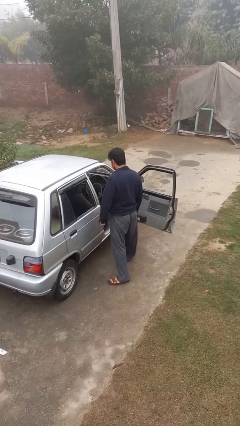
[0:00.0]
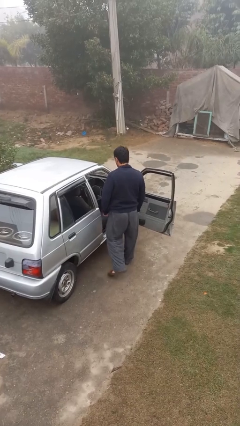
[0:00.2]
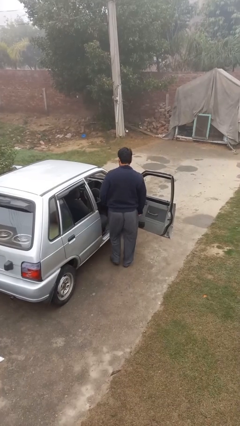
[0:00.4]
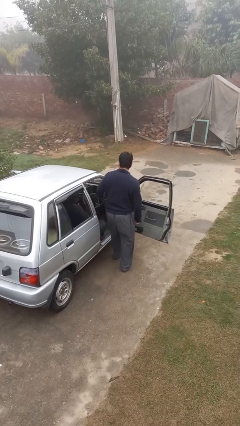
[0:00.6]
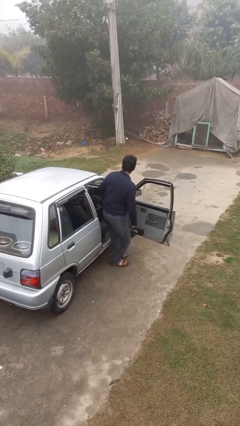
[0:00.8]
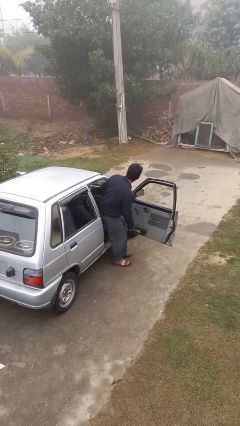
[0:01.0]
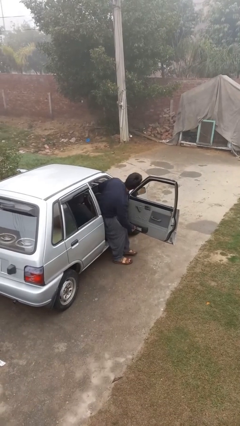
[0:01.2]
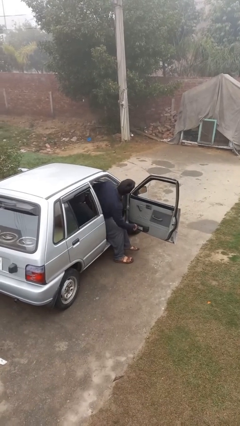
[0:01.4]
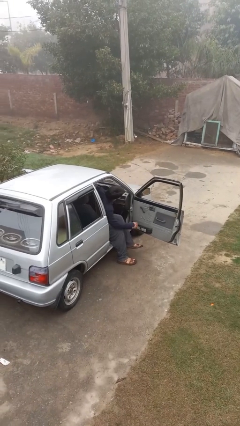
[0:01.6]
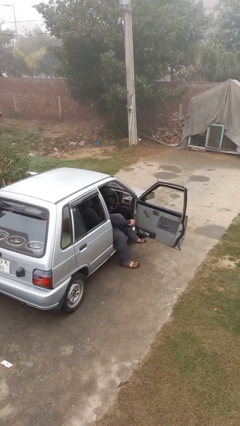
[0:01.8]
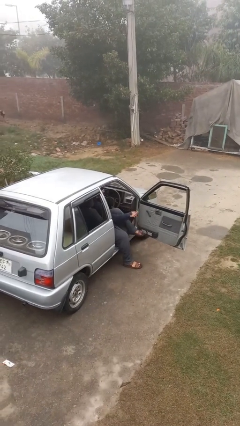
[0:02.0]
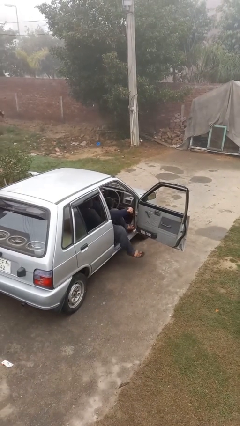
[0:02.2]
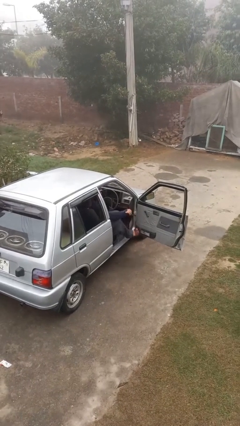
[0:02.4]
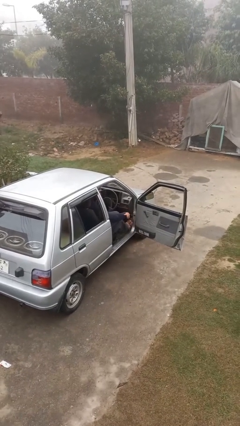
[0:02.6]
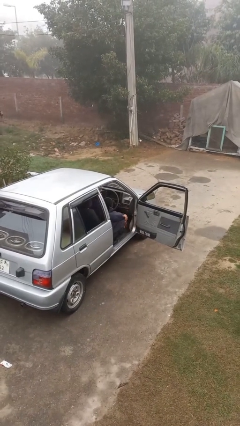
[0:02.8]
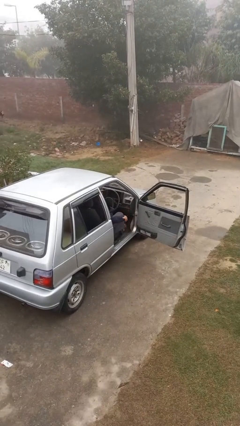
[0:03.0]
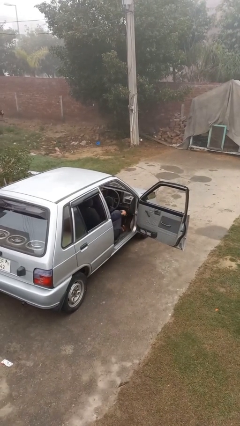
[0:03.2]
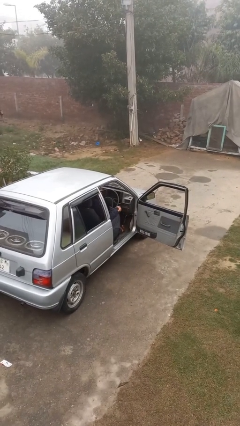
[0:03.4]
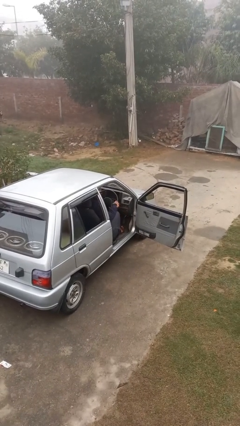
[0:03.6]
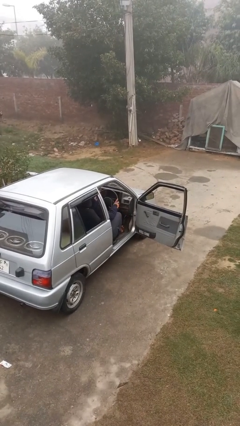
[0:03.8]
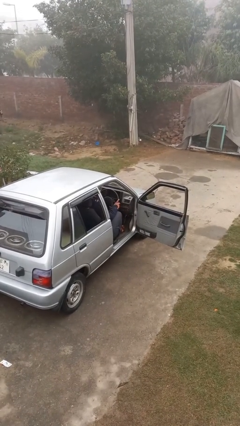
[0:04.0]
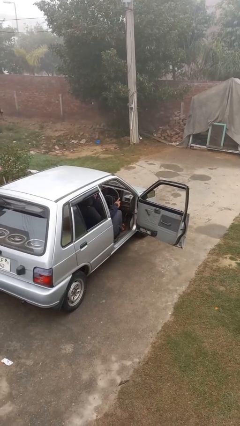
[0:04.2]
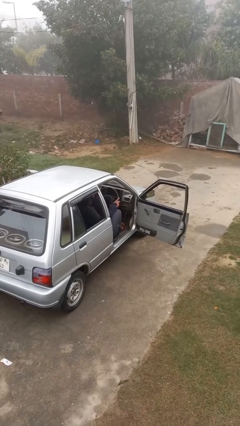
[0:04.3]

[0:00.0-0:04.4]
person enters car

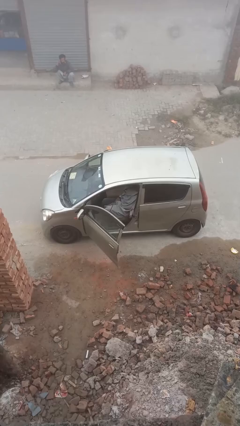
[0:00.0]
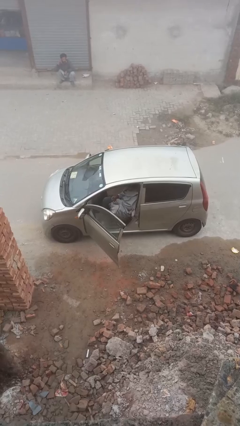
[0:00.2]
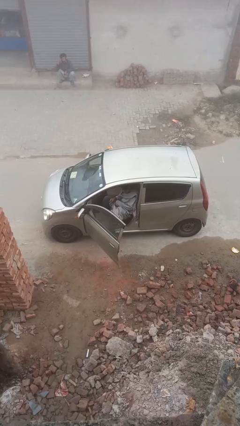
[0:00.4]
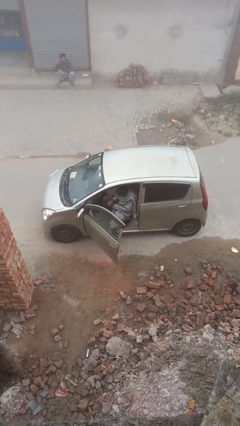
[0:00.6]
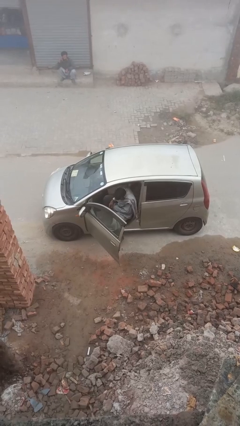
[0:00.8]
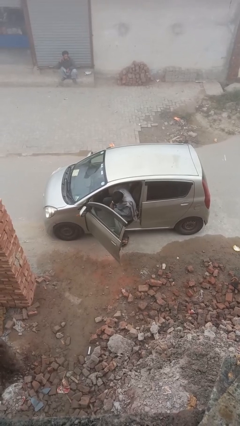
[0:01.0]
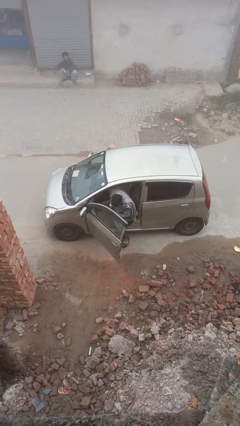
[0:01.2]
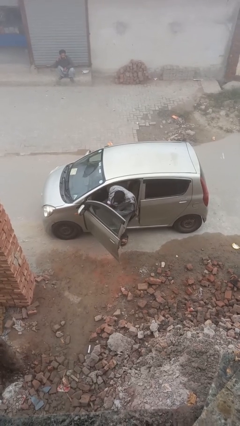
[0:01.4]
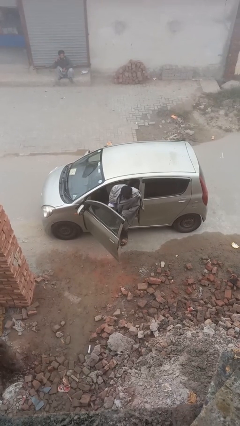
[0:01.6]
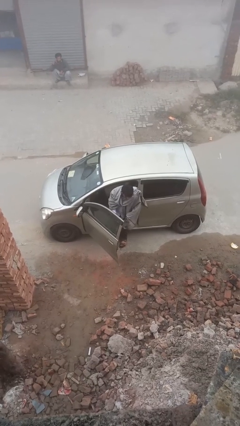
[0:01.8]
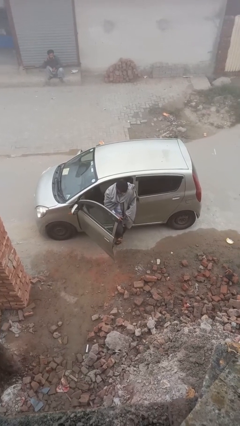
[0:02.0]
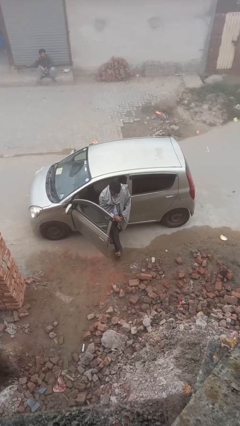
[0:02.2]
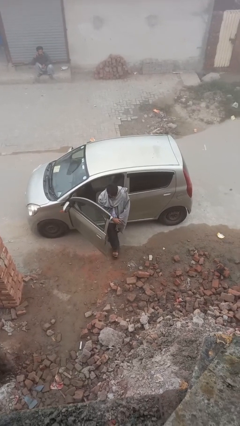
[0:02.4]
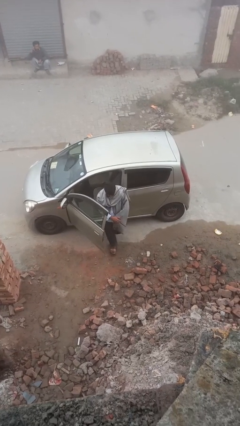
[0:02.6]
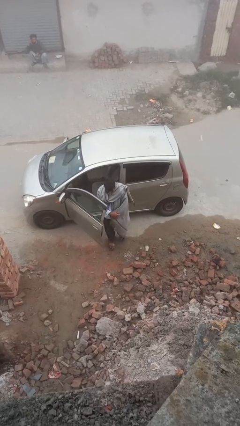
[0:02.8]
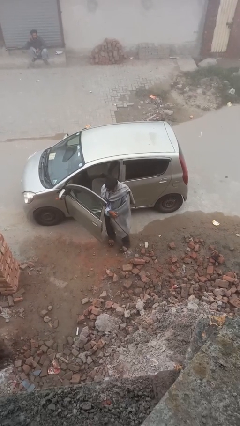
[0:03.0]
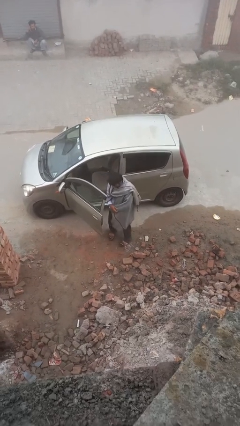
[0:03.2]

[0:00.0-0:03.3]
person exits car

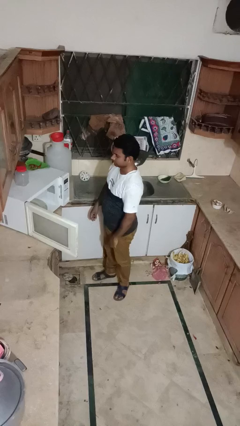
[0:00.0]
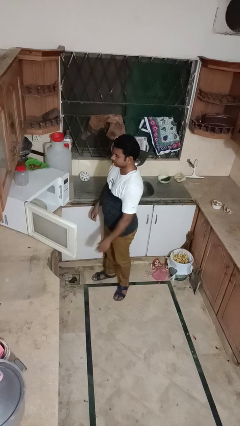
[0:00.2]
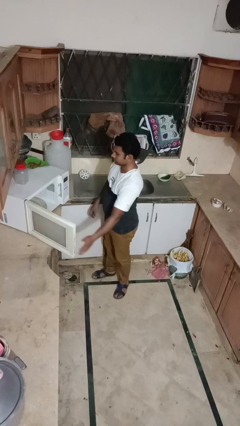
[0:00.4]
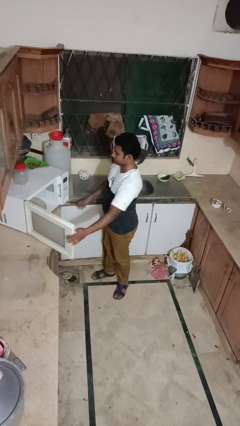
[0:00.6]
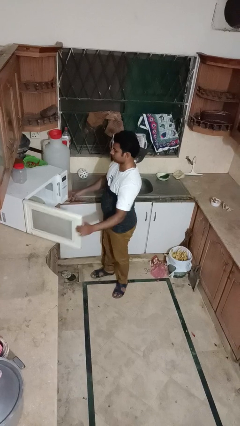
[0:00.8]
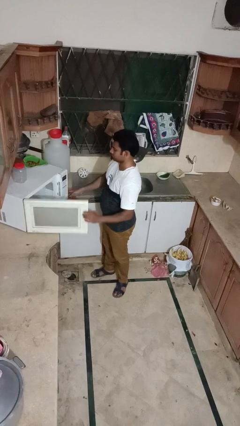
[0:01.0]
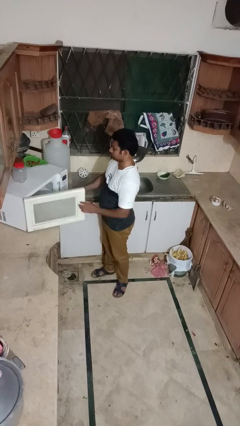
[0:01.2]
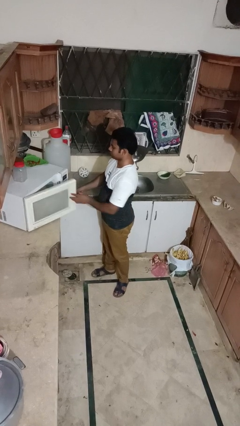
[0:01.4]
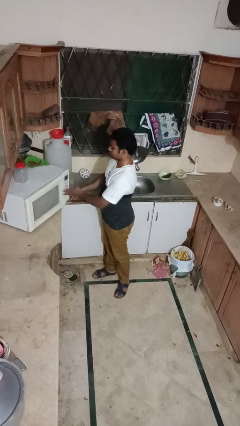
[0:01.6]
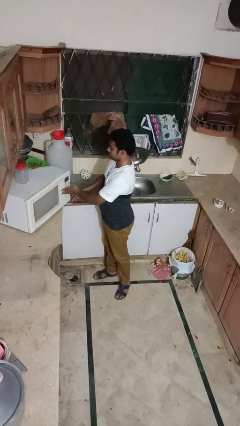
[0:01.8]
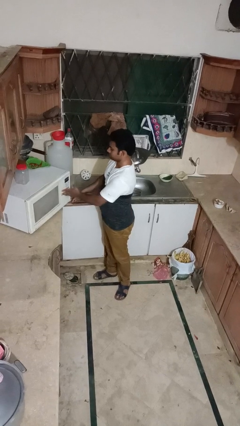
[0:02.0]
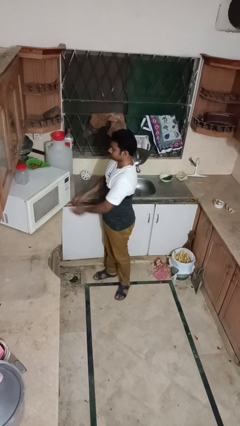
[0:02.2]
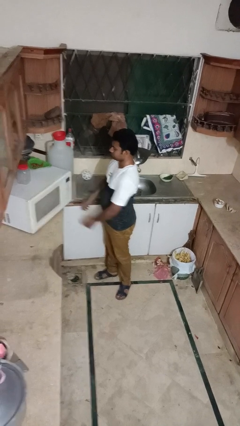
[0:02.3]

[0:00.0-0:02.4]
person closes oven door

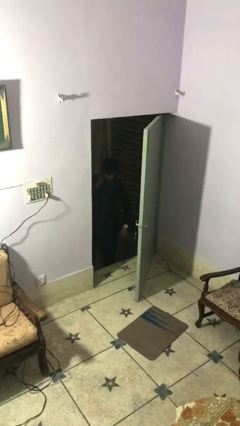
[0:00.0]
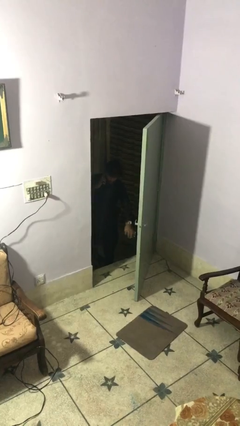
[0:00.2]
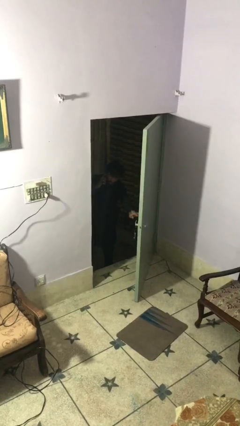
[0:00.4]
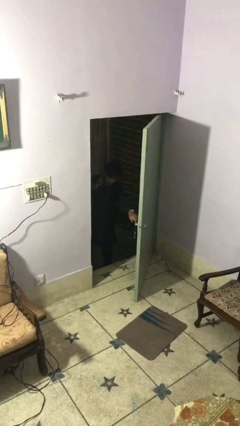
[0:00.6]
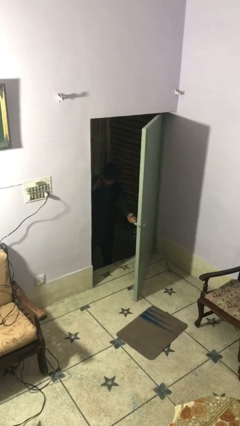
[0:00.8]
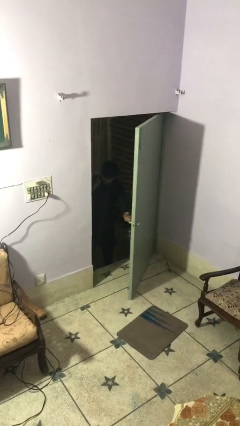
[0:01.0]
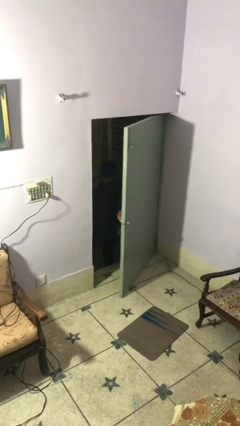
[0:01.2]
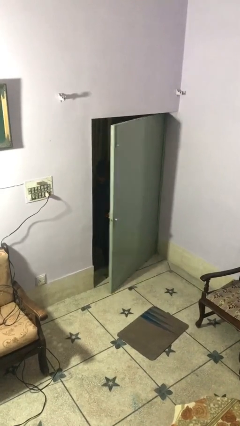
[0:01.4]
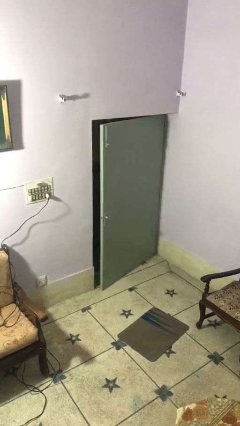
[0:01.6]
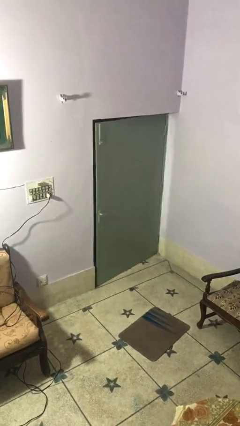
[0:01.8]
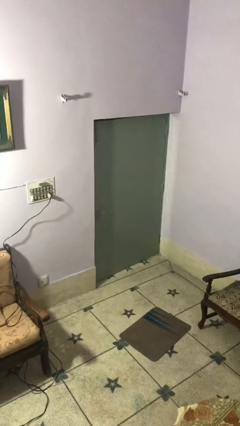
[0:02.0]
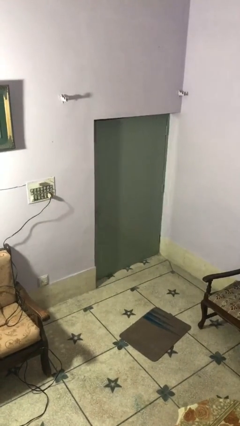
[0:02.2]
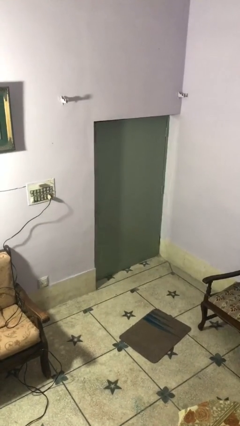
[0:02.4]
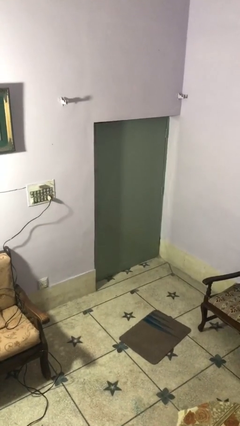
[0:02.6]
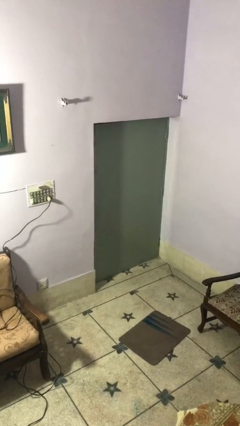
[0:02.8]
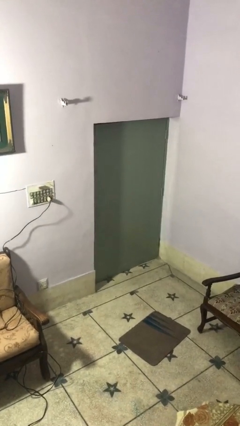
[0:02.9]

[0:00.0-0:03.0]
person closes facility door

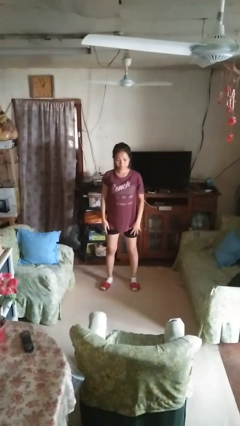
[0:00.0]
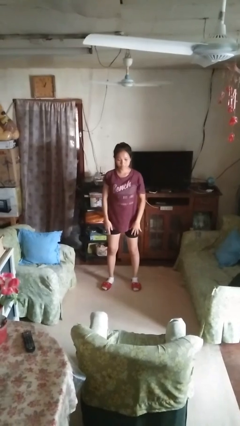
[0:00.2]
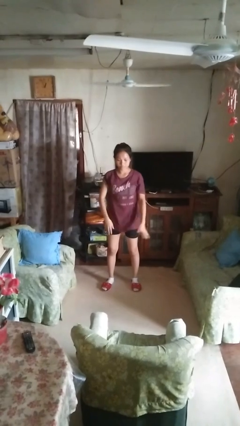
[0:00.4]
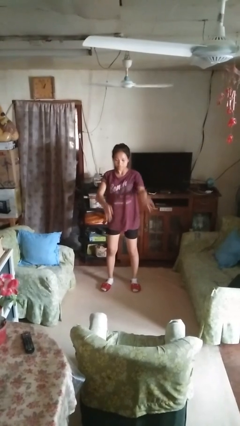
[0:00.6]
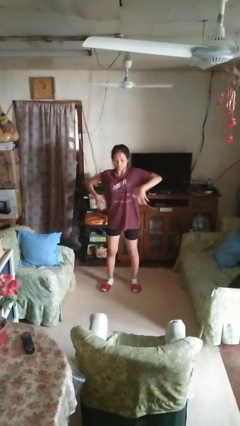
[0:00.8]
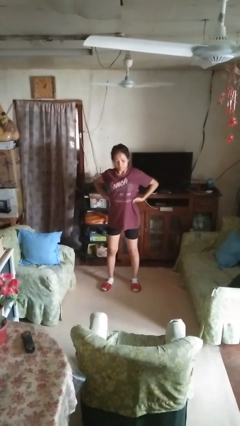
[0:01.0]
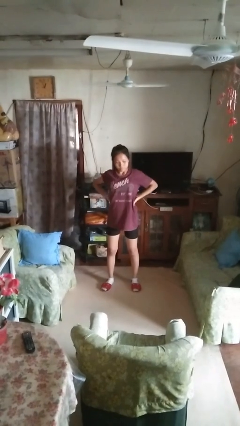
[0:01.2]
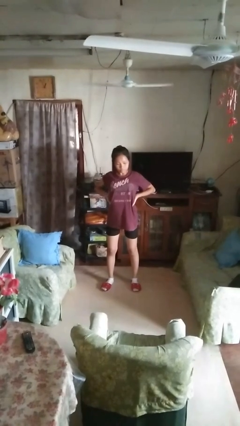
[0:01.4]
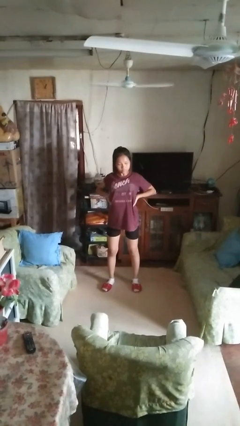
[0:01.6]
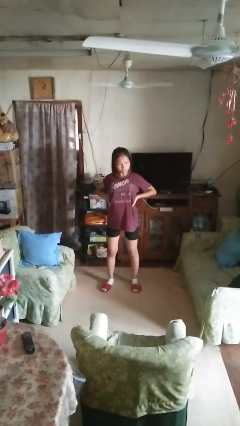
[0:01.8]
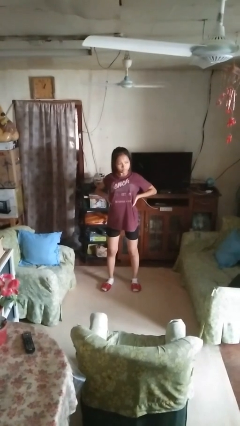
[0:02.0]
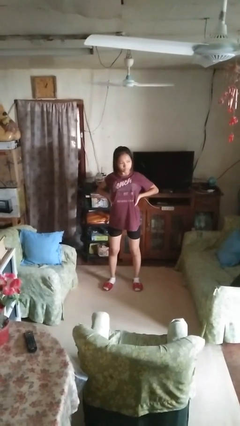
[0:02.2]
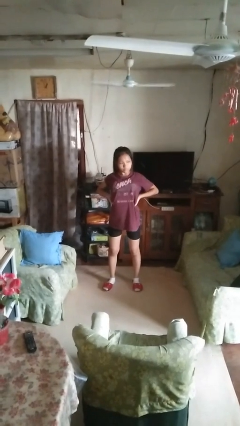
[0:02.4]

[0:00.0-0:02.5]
person stretches back

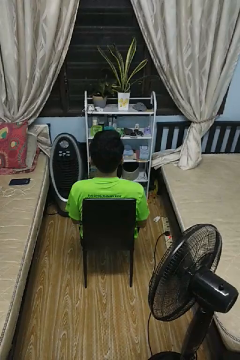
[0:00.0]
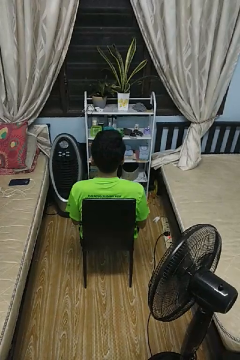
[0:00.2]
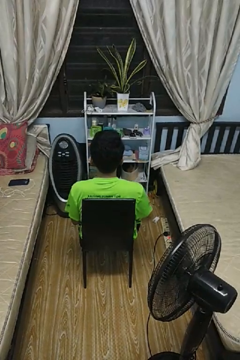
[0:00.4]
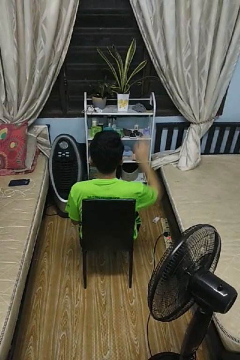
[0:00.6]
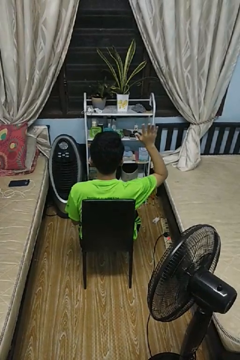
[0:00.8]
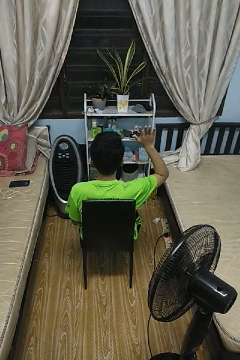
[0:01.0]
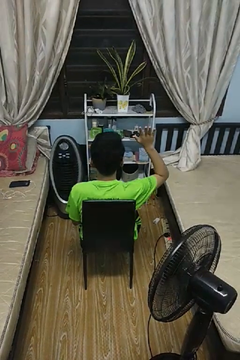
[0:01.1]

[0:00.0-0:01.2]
person gestures number five

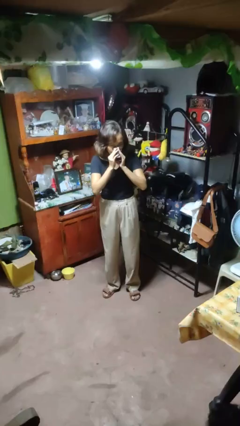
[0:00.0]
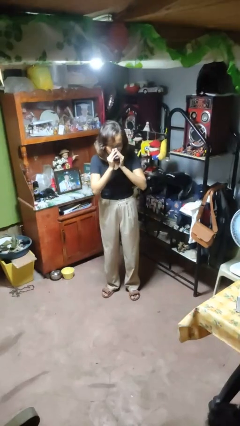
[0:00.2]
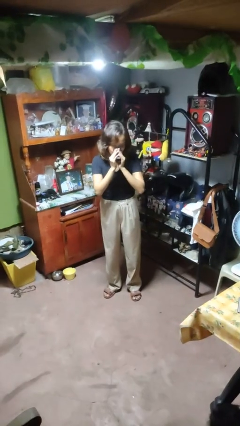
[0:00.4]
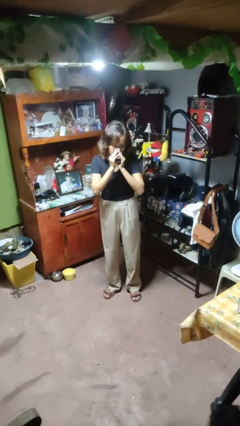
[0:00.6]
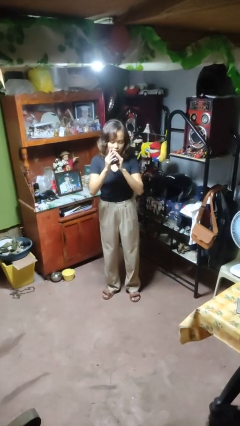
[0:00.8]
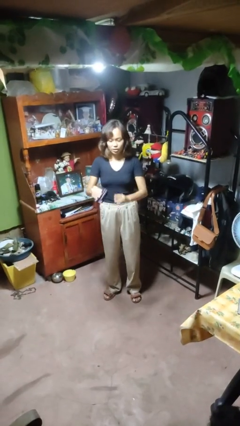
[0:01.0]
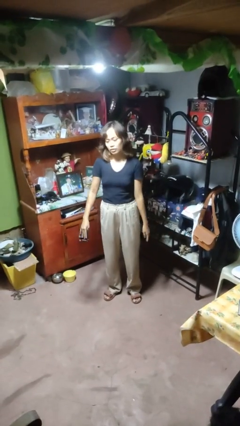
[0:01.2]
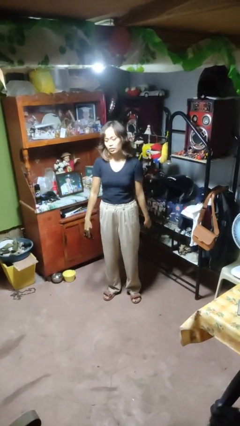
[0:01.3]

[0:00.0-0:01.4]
person blows nose
